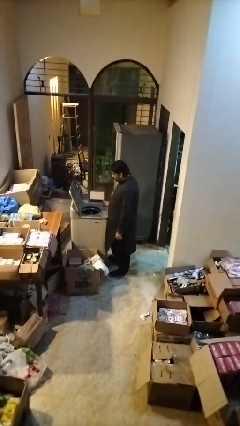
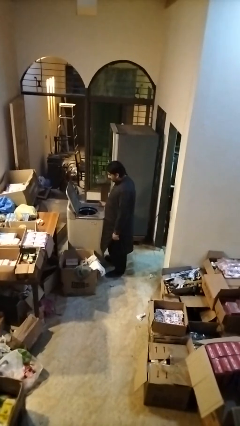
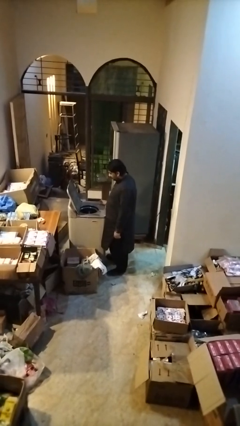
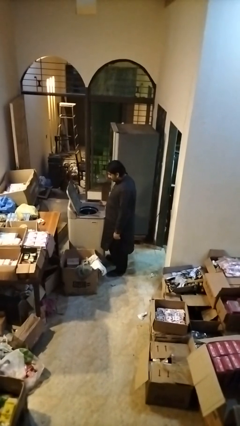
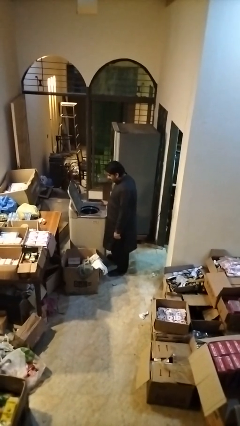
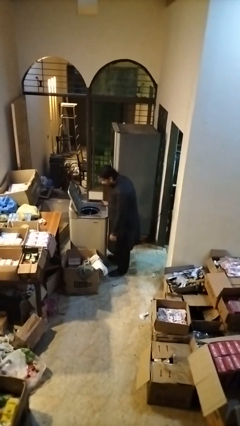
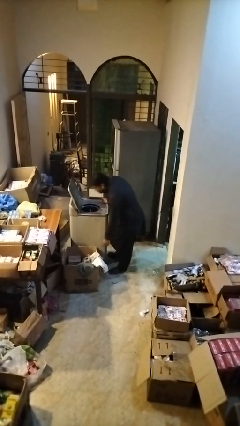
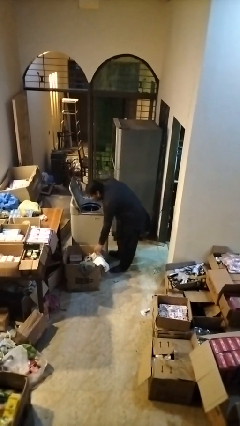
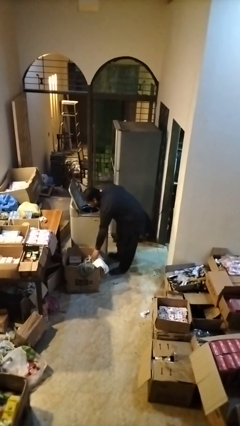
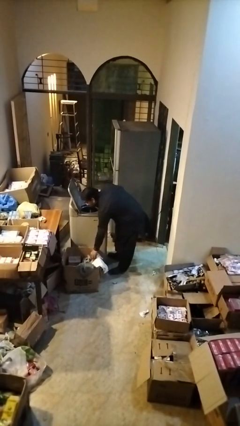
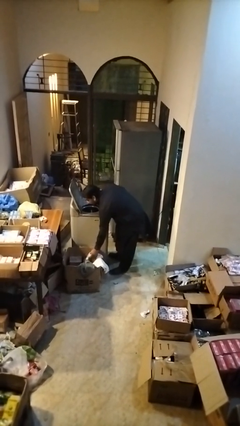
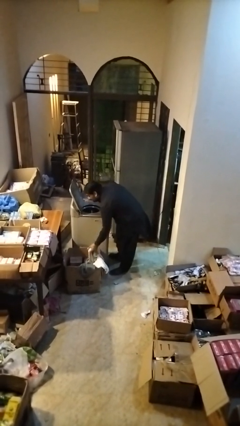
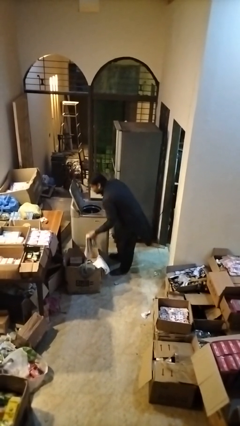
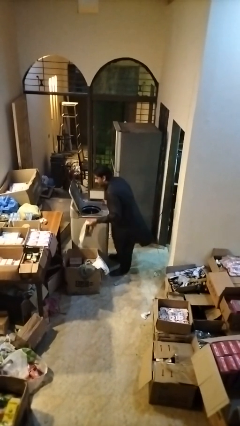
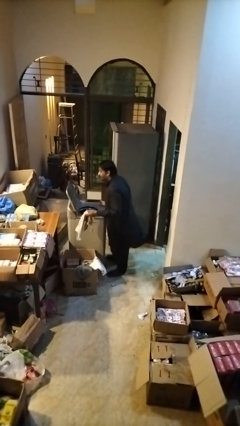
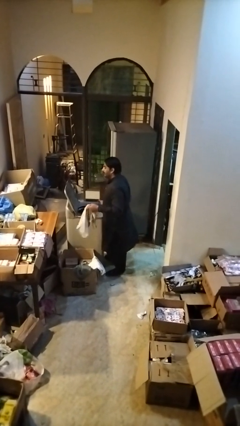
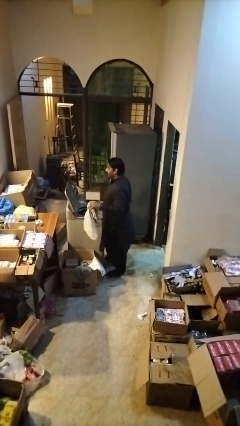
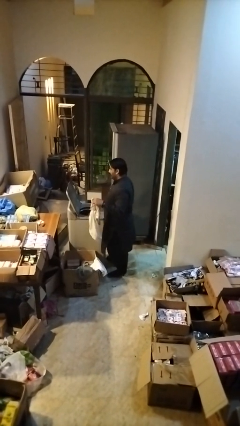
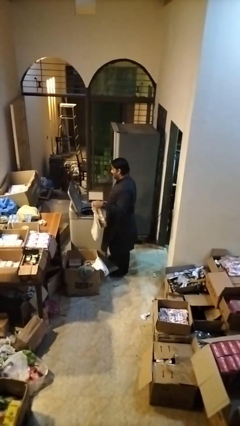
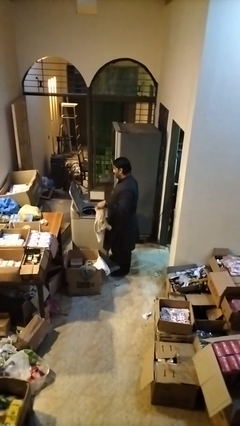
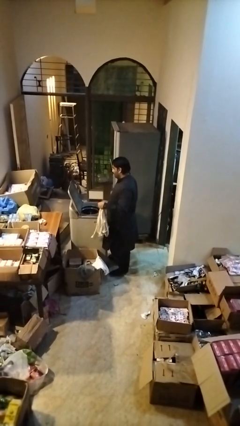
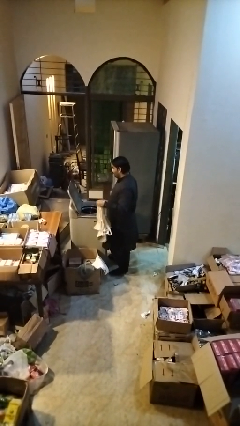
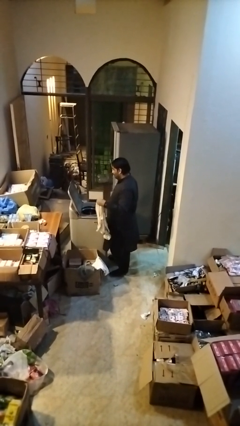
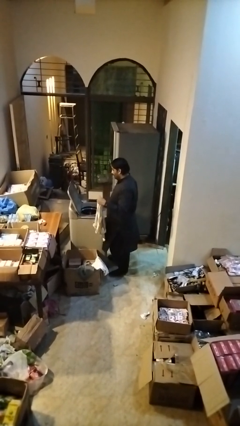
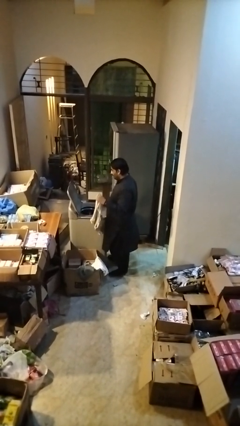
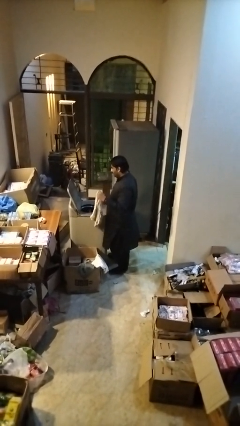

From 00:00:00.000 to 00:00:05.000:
person unloads clotheswasher

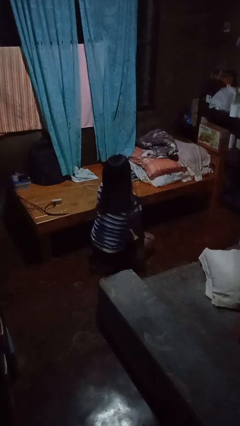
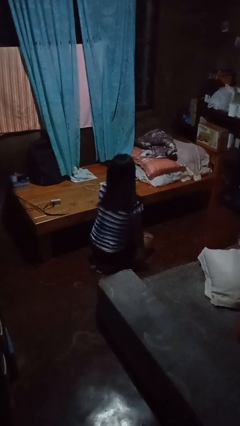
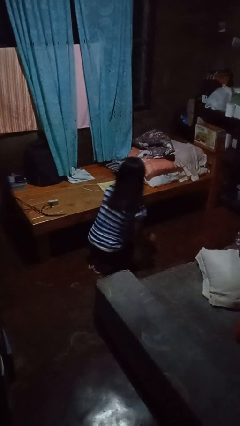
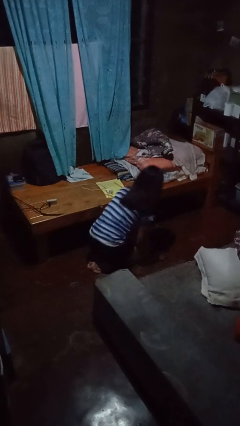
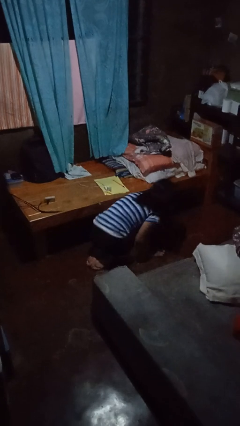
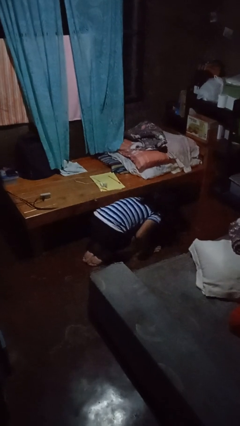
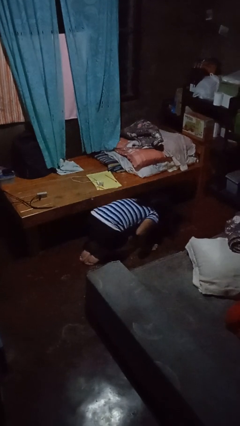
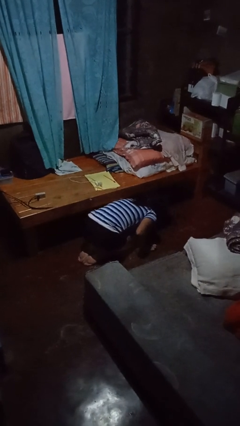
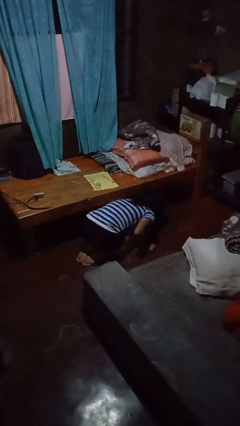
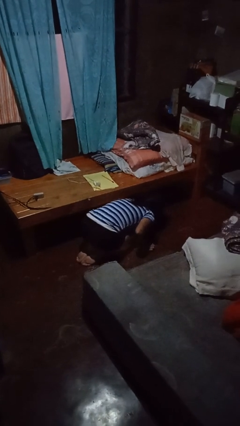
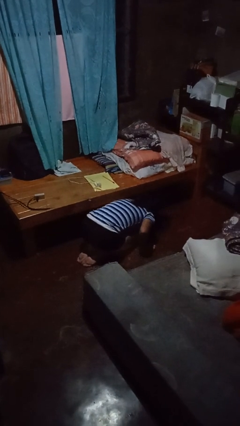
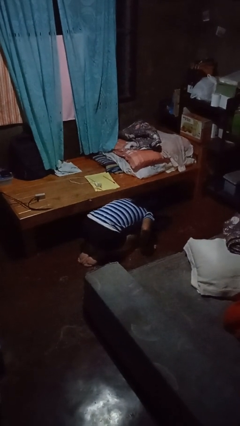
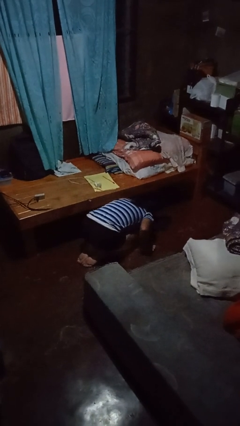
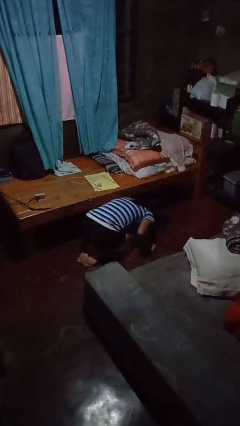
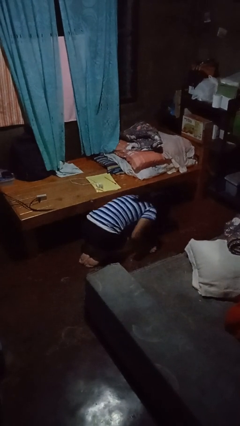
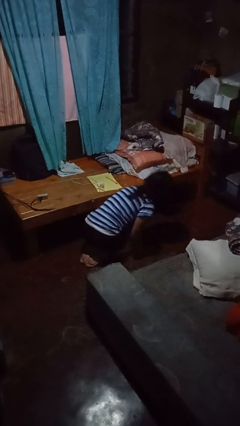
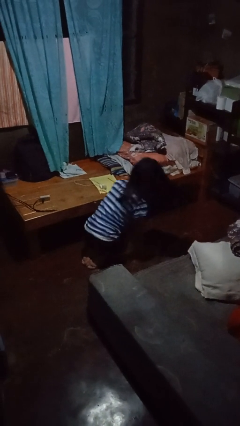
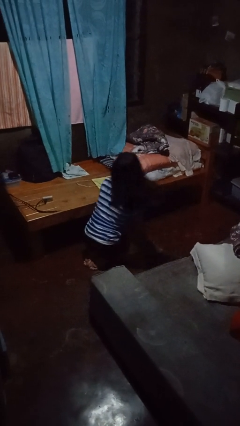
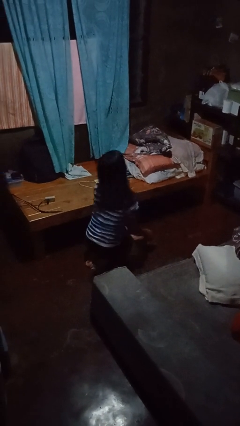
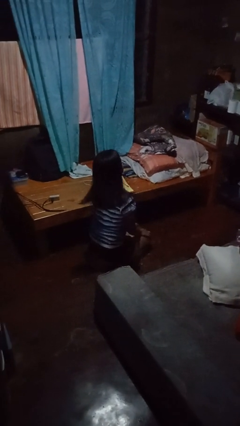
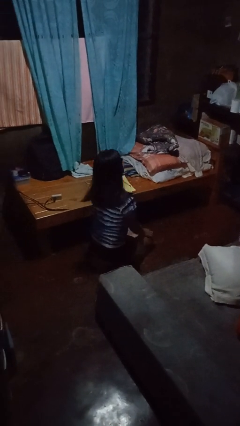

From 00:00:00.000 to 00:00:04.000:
person searches under bed

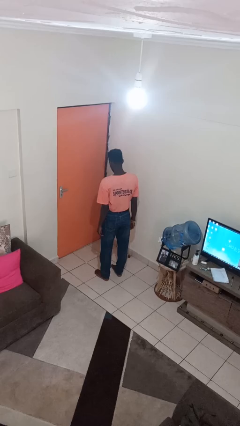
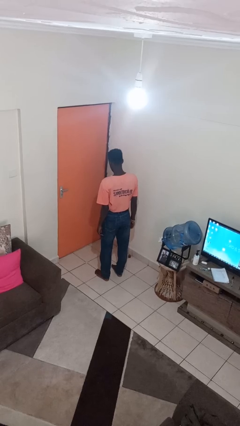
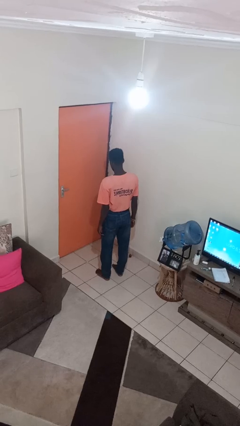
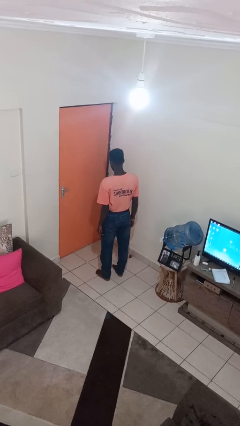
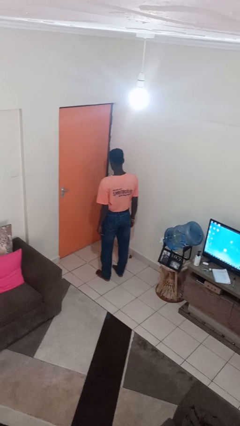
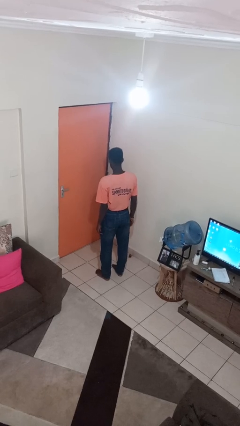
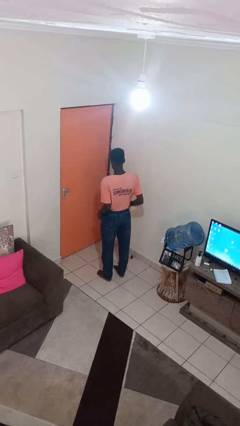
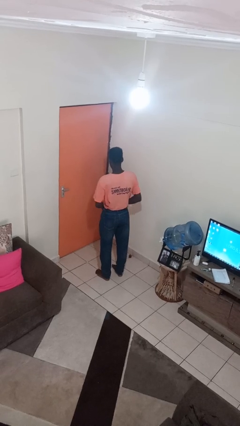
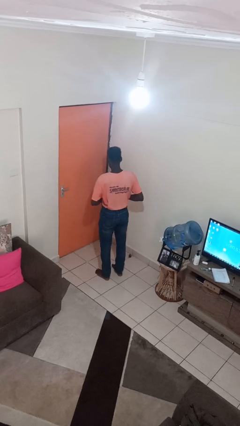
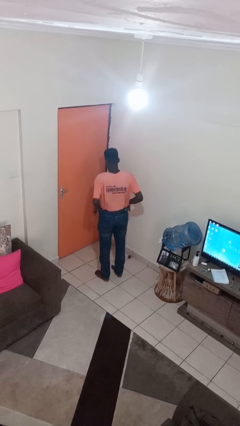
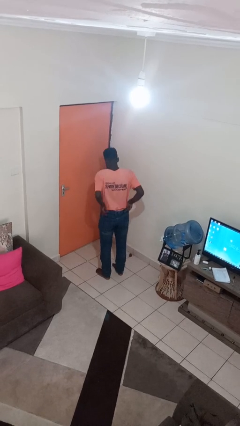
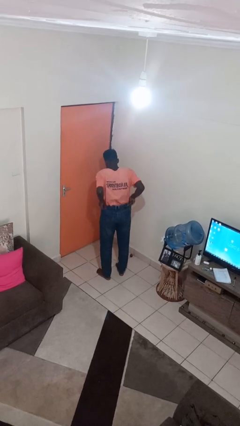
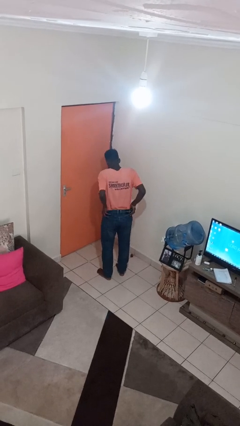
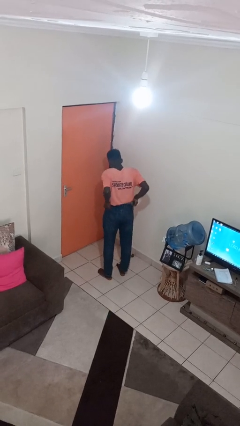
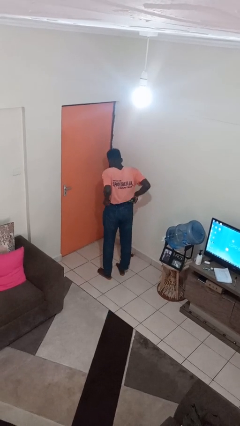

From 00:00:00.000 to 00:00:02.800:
person hikes up pants

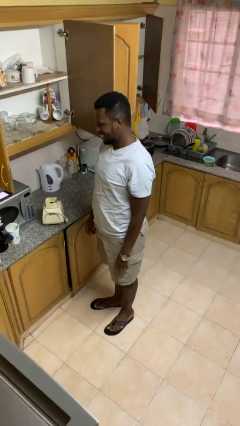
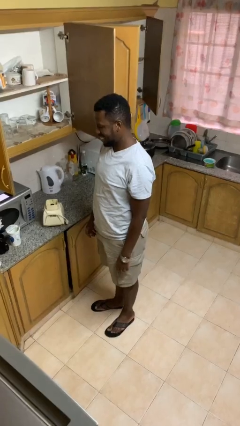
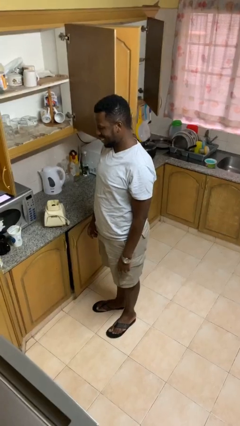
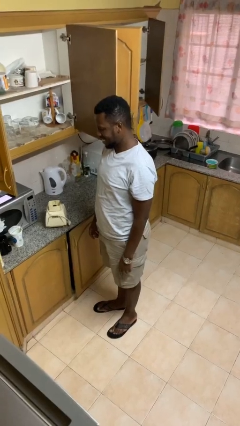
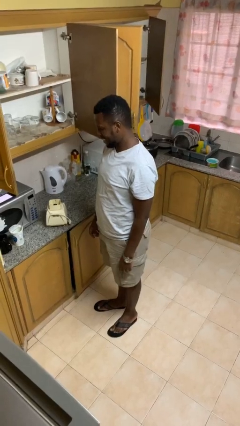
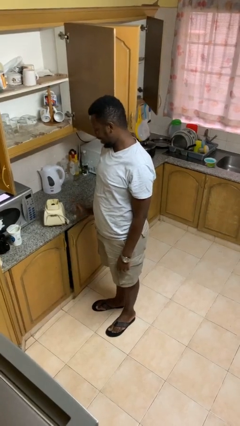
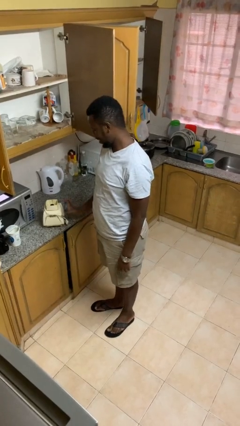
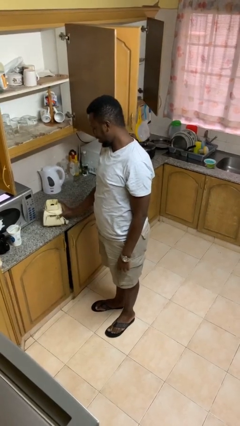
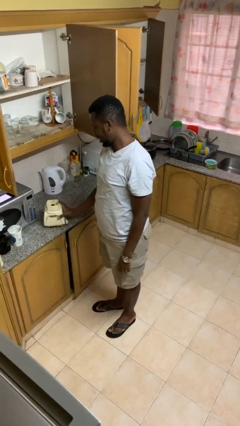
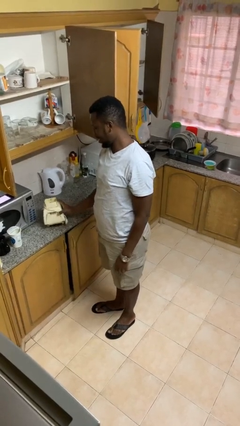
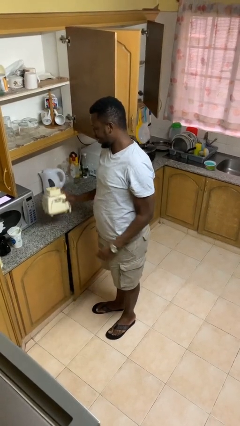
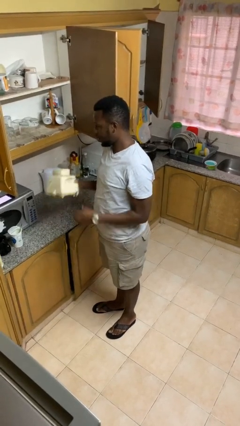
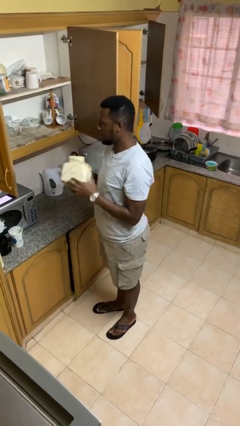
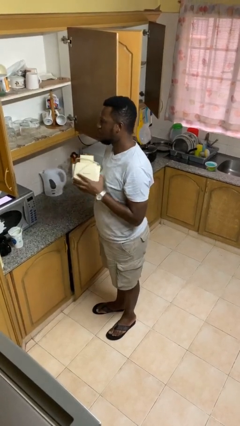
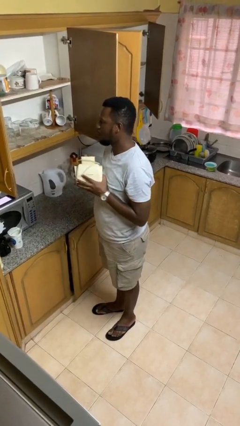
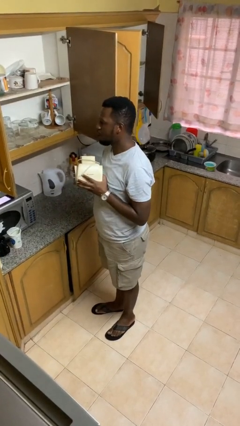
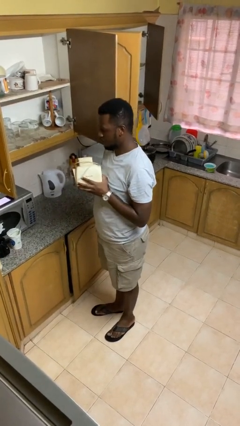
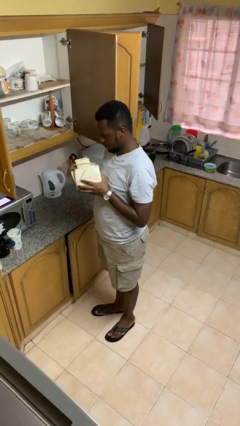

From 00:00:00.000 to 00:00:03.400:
person picks up object from table

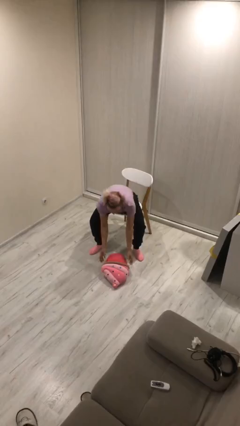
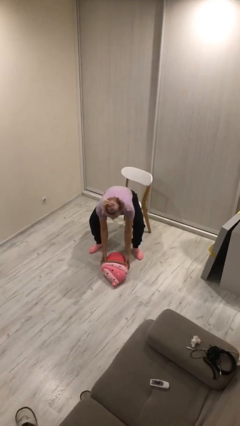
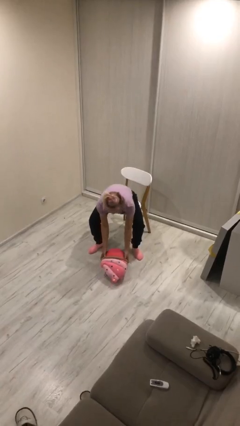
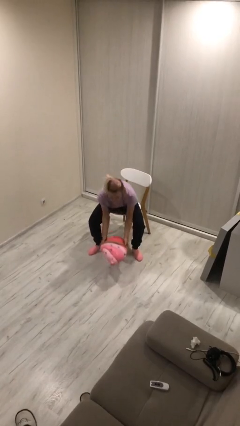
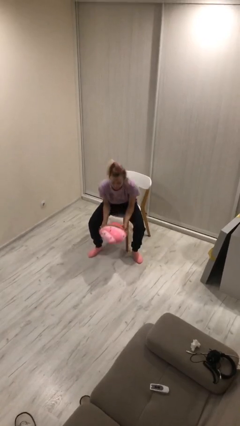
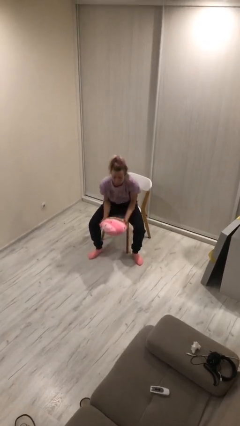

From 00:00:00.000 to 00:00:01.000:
person picks up object from floor

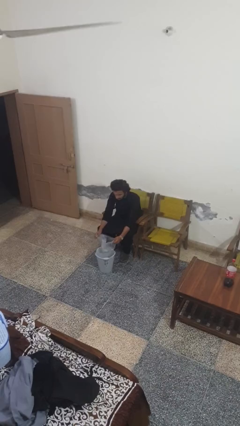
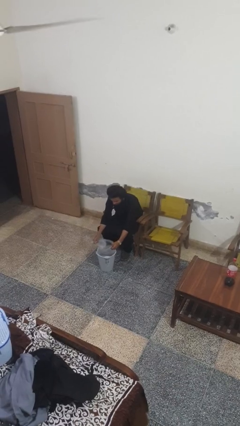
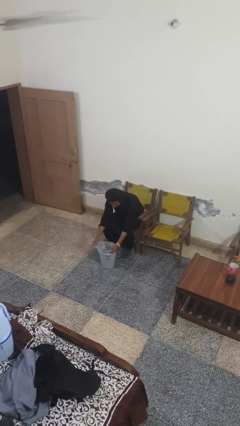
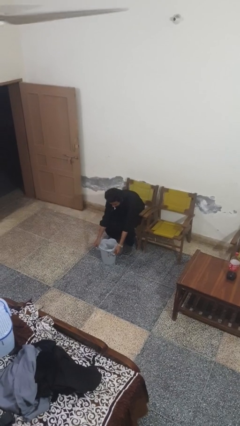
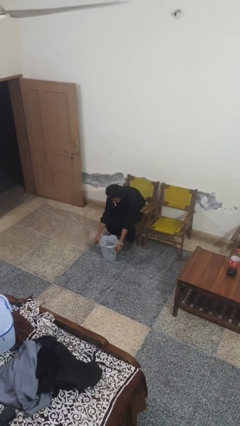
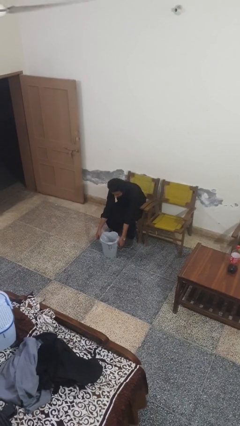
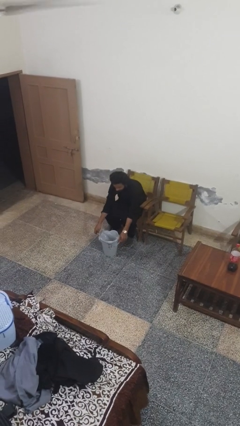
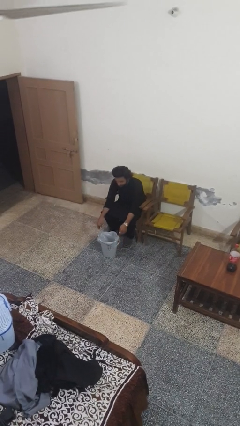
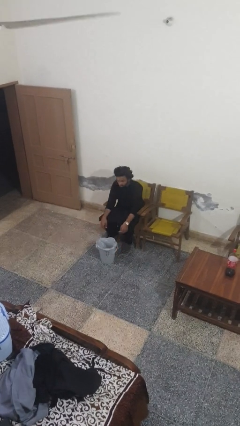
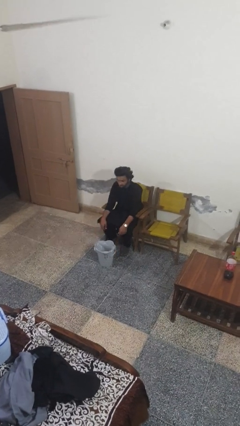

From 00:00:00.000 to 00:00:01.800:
person inserts trashbag into trashcan
